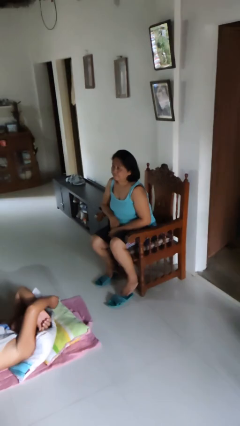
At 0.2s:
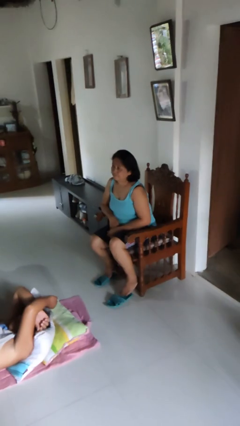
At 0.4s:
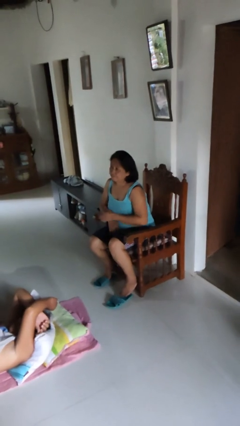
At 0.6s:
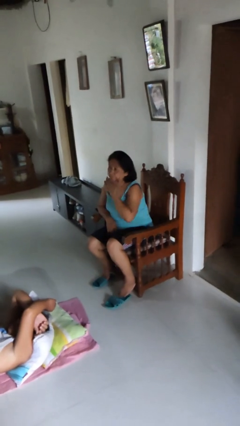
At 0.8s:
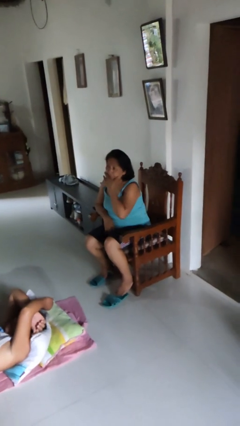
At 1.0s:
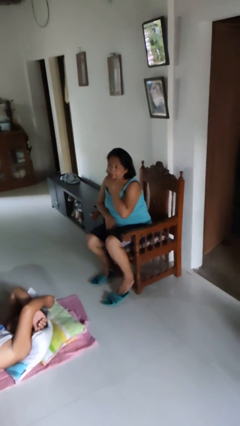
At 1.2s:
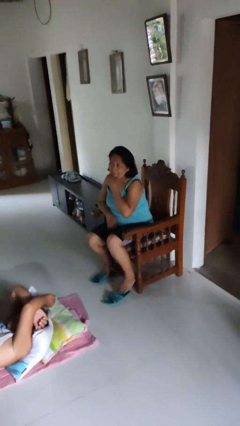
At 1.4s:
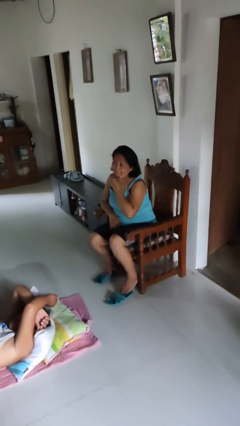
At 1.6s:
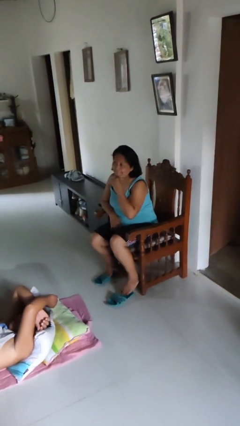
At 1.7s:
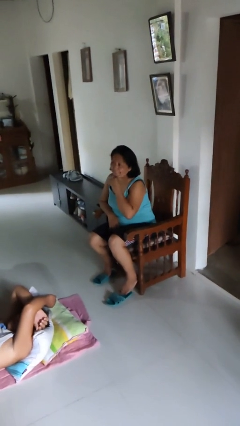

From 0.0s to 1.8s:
person strokes chin

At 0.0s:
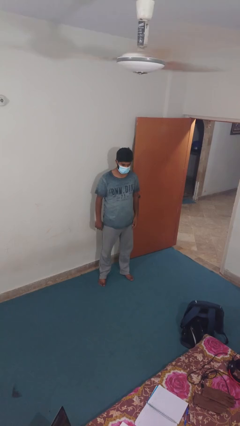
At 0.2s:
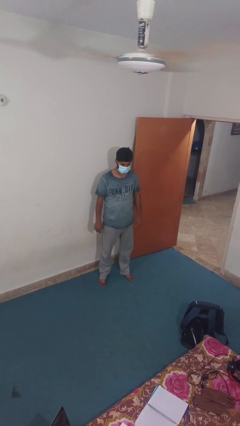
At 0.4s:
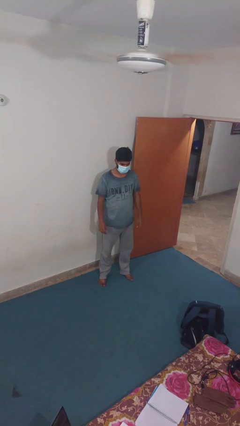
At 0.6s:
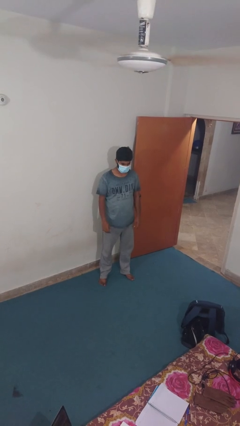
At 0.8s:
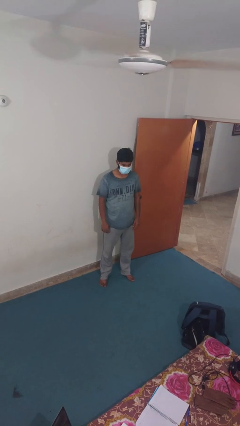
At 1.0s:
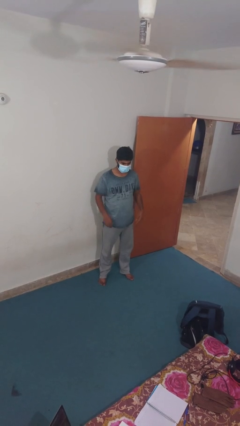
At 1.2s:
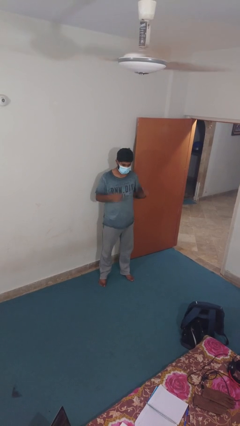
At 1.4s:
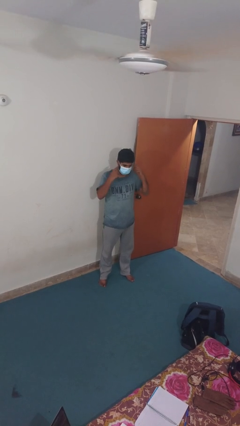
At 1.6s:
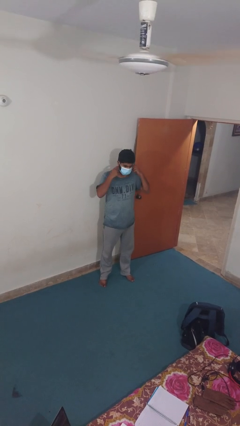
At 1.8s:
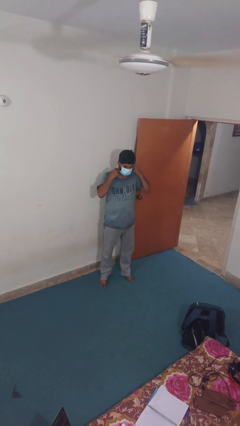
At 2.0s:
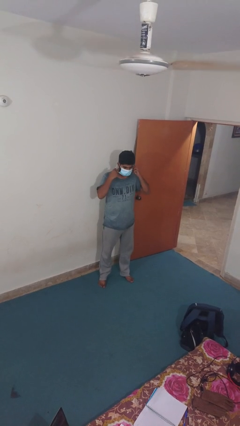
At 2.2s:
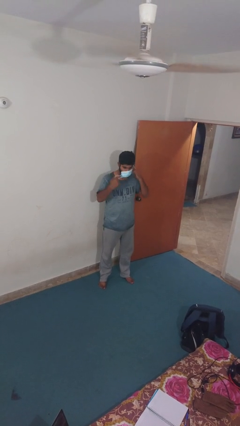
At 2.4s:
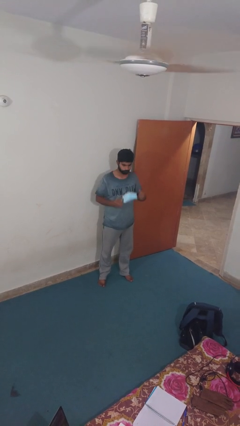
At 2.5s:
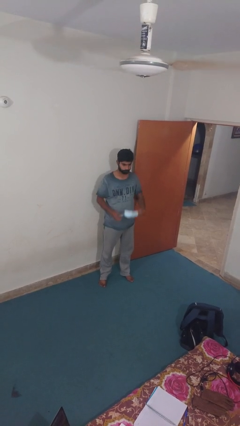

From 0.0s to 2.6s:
person takes off facemask

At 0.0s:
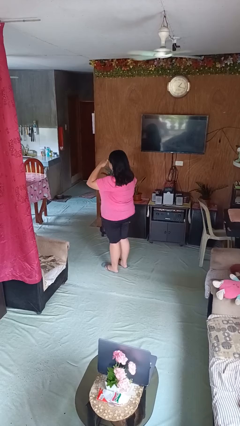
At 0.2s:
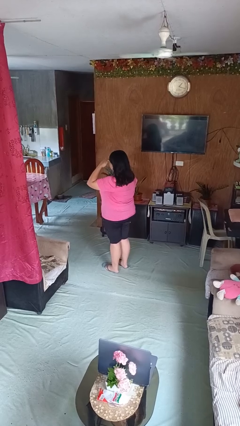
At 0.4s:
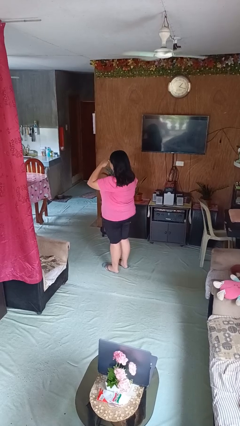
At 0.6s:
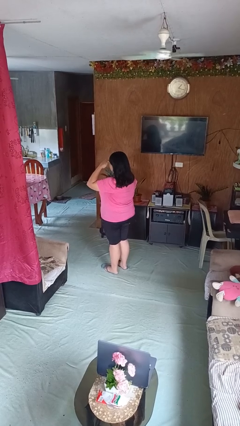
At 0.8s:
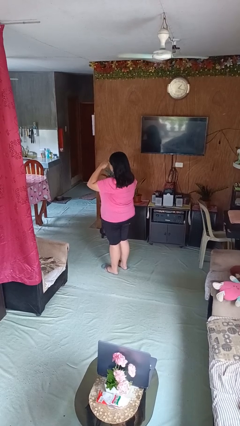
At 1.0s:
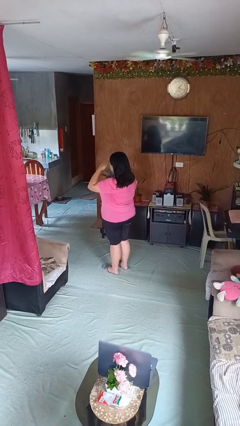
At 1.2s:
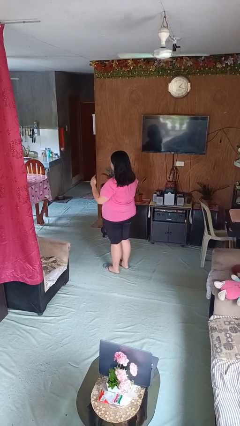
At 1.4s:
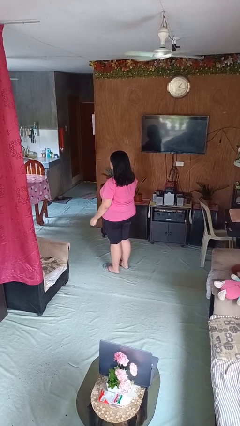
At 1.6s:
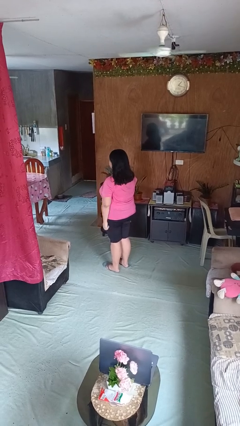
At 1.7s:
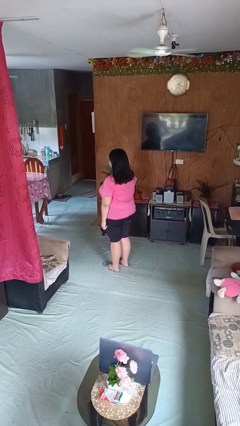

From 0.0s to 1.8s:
person salutes

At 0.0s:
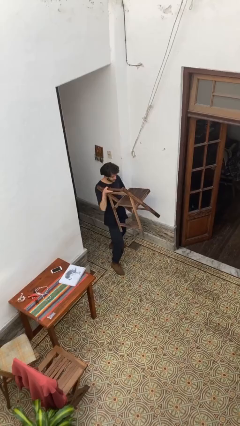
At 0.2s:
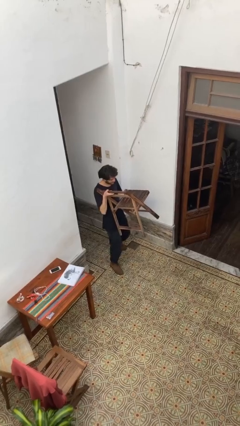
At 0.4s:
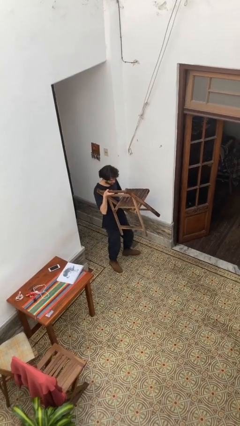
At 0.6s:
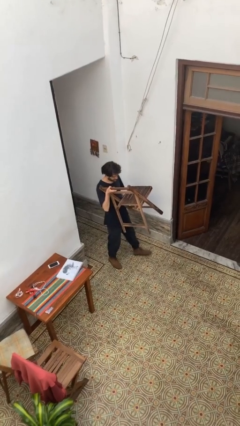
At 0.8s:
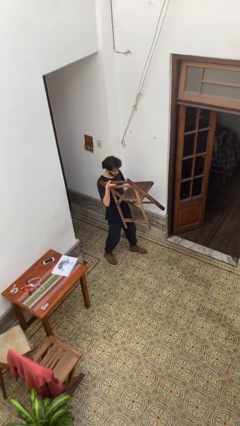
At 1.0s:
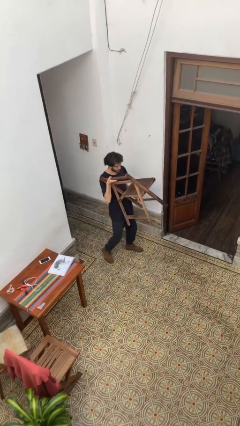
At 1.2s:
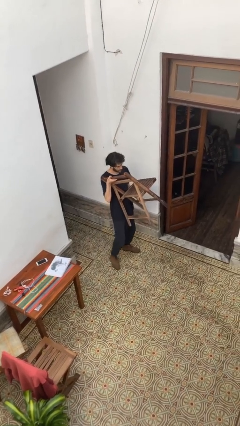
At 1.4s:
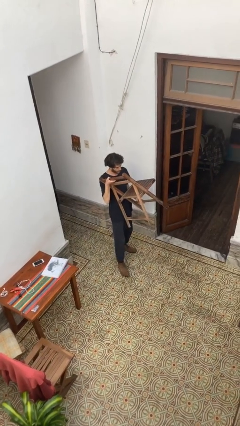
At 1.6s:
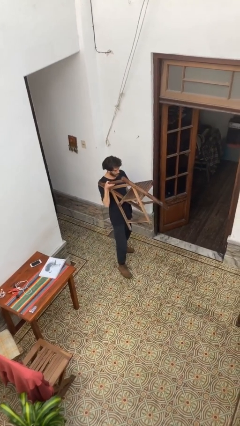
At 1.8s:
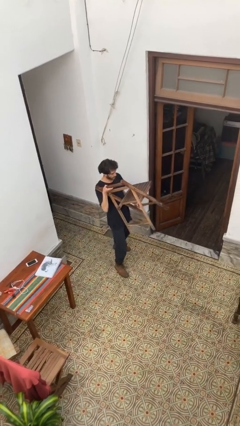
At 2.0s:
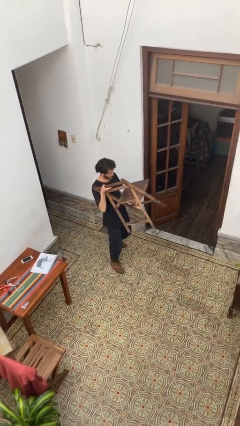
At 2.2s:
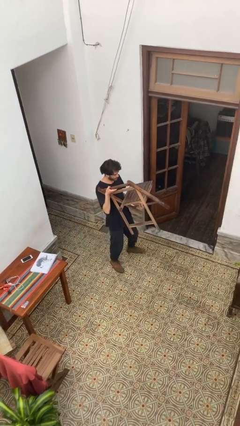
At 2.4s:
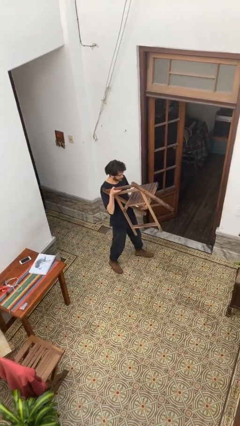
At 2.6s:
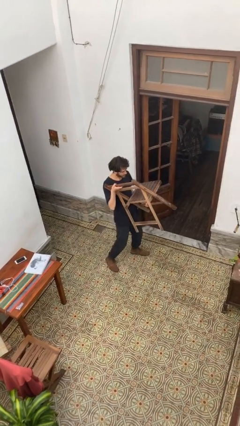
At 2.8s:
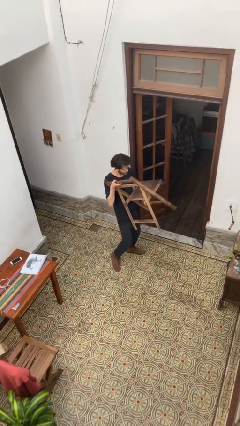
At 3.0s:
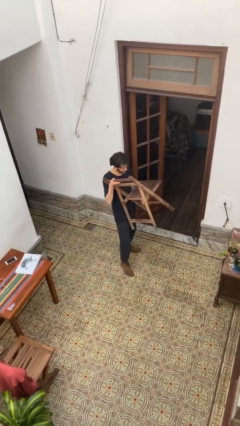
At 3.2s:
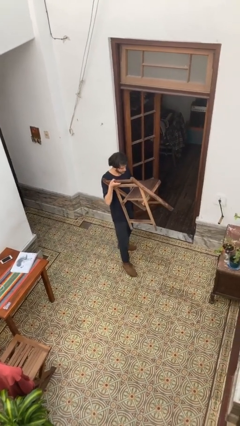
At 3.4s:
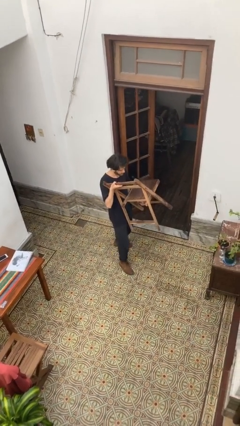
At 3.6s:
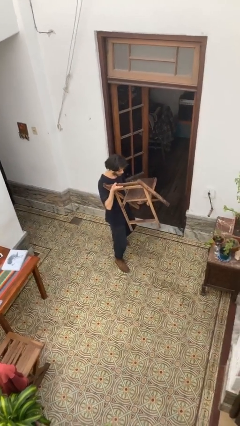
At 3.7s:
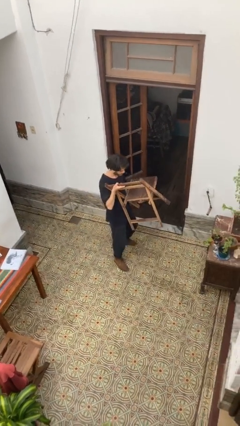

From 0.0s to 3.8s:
person carries heavy object

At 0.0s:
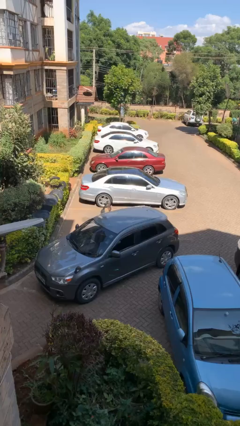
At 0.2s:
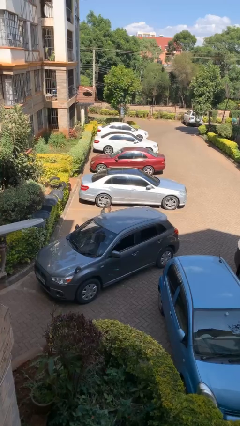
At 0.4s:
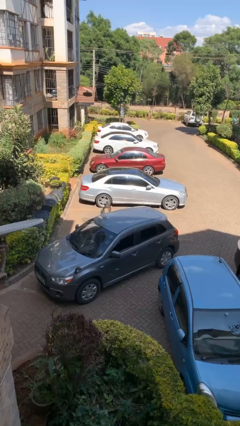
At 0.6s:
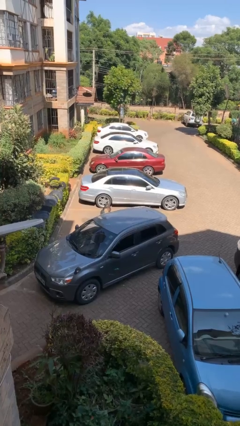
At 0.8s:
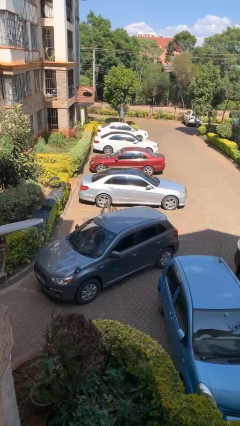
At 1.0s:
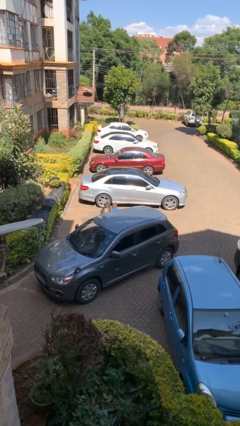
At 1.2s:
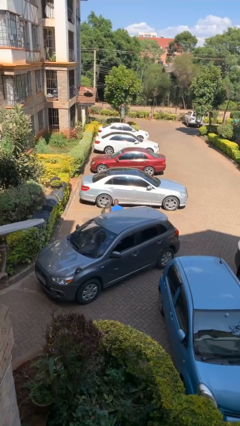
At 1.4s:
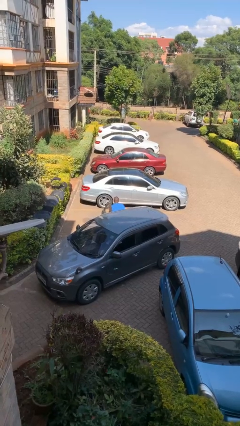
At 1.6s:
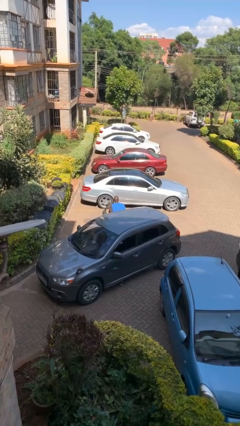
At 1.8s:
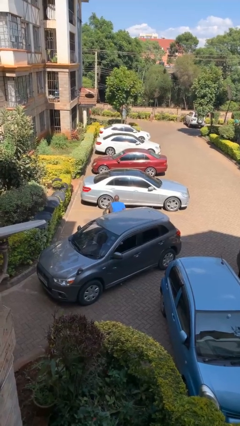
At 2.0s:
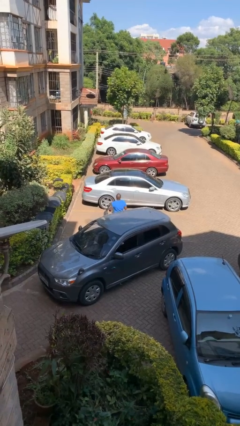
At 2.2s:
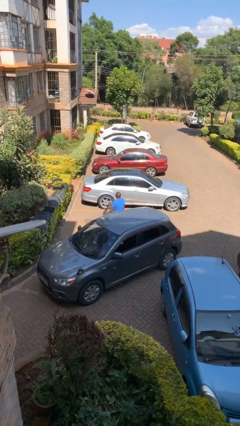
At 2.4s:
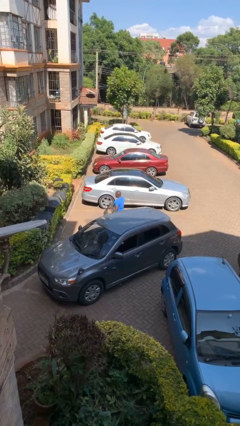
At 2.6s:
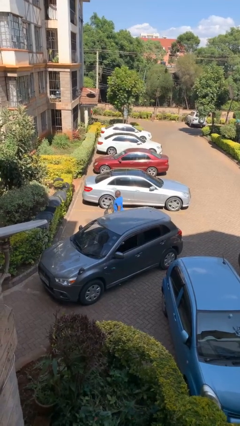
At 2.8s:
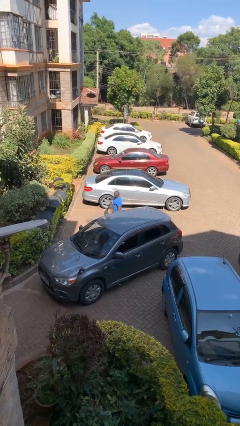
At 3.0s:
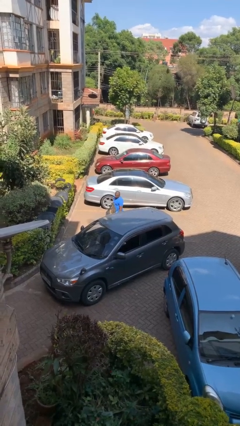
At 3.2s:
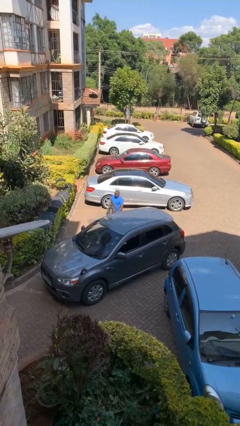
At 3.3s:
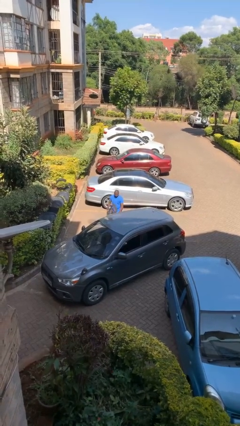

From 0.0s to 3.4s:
person exits car

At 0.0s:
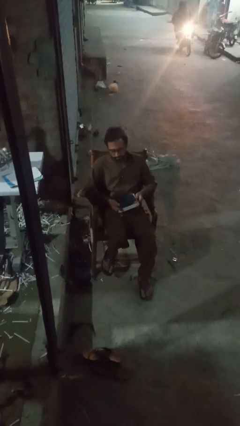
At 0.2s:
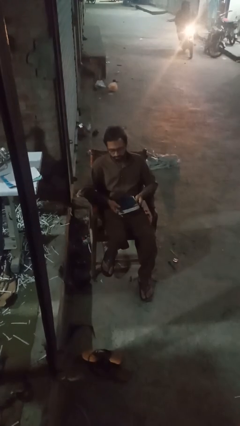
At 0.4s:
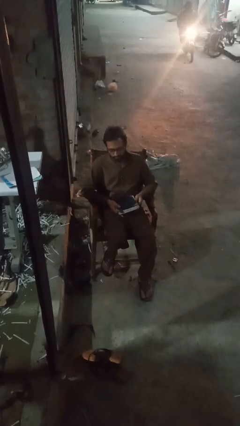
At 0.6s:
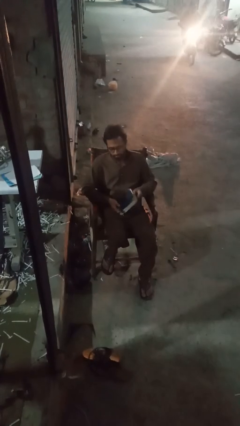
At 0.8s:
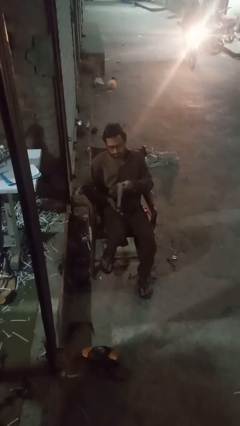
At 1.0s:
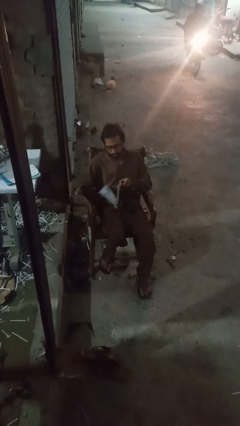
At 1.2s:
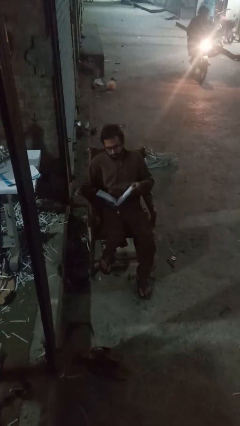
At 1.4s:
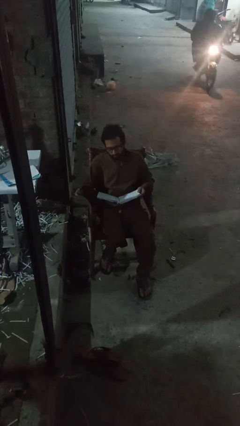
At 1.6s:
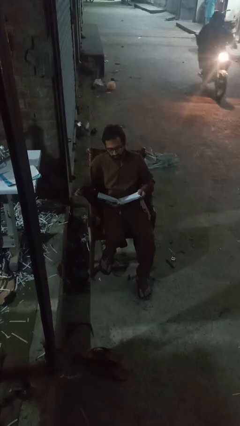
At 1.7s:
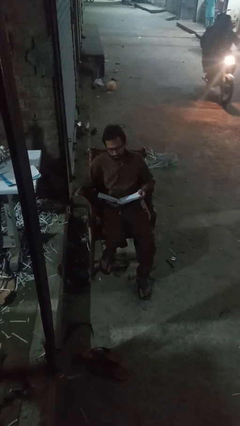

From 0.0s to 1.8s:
person reads book

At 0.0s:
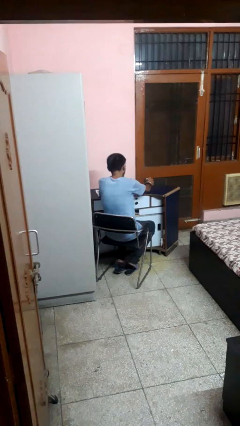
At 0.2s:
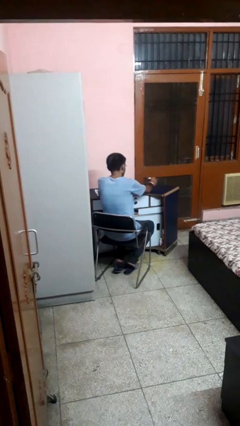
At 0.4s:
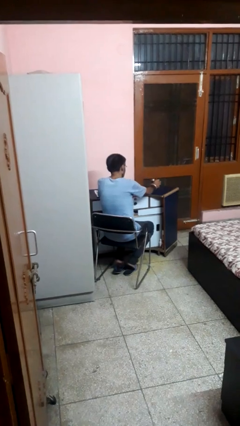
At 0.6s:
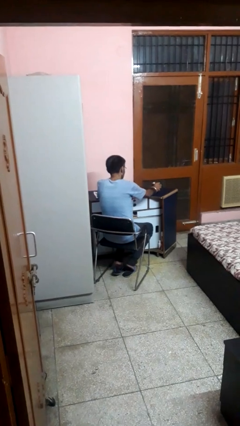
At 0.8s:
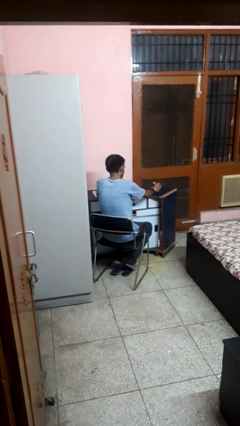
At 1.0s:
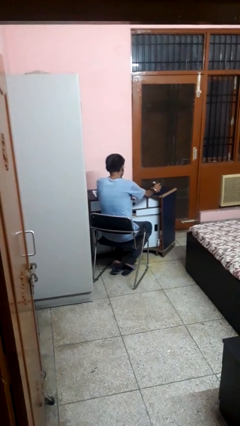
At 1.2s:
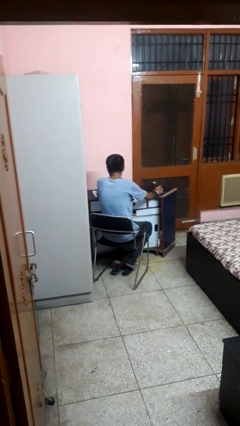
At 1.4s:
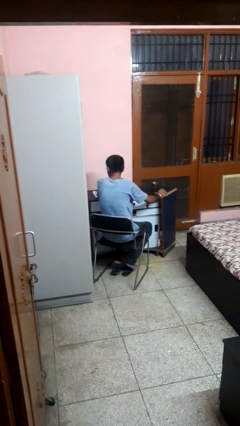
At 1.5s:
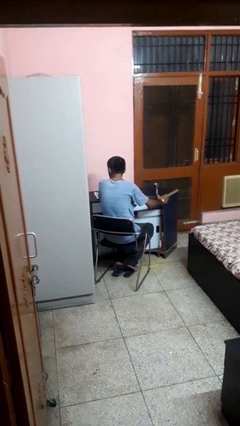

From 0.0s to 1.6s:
person sets upright glass

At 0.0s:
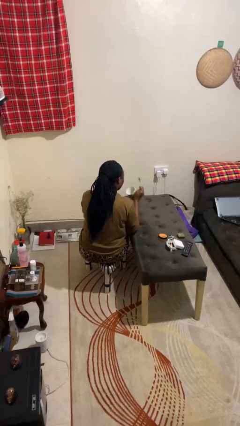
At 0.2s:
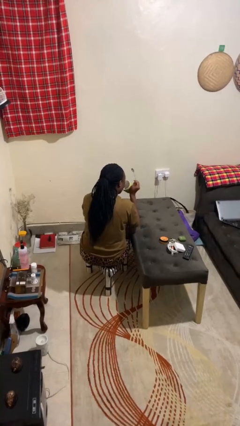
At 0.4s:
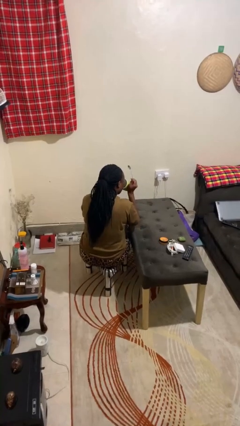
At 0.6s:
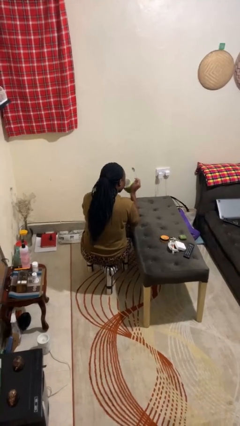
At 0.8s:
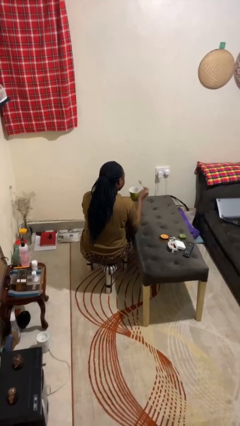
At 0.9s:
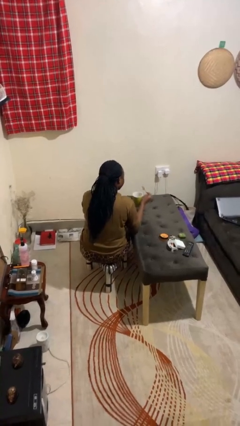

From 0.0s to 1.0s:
person drinks from mug
